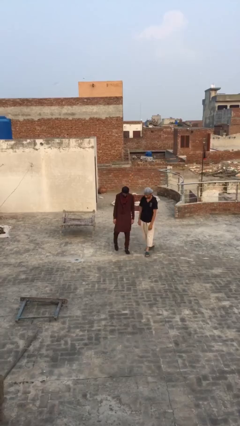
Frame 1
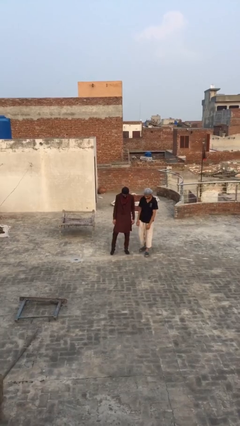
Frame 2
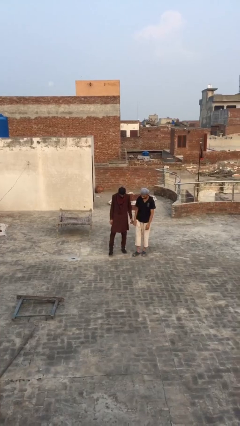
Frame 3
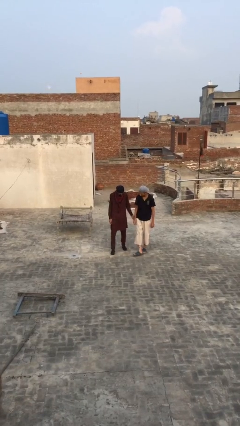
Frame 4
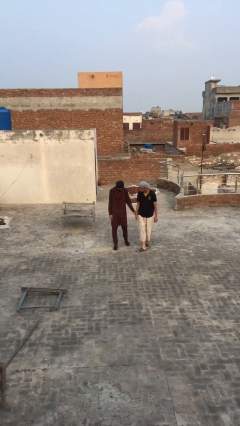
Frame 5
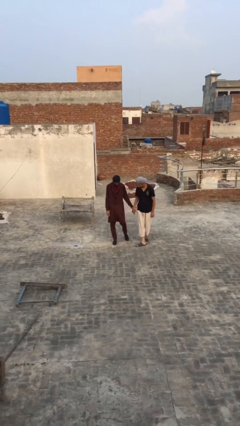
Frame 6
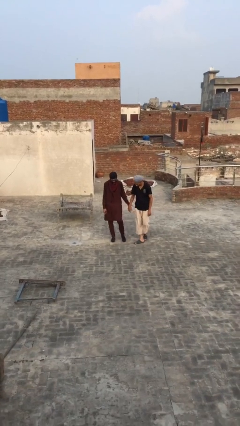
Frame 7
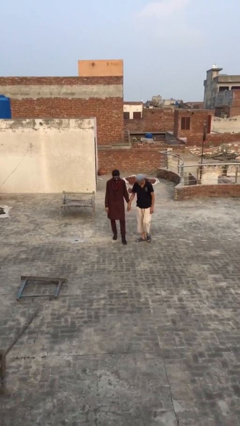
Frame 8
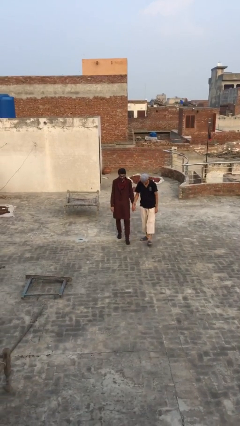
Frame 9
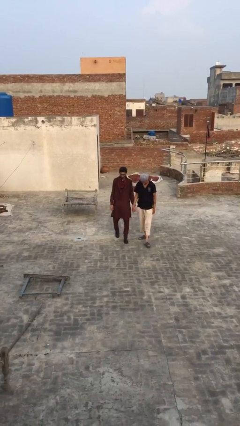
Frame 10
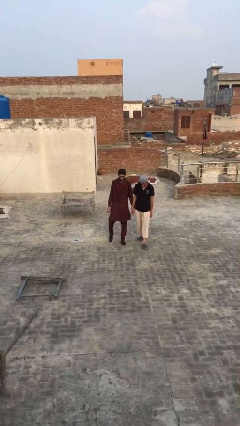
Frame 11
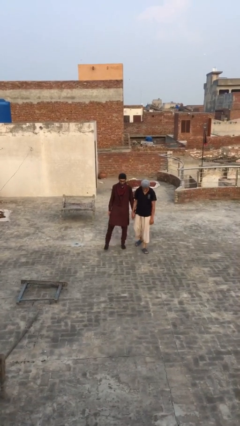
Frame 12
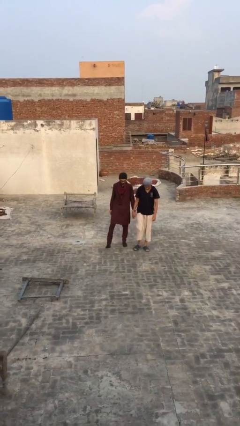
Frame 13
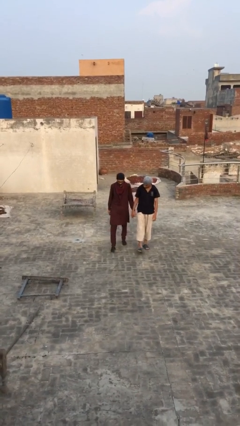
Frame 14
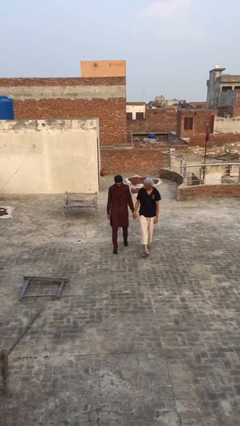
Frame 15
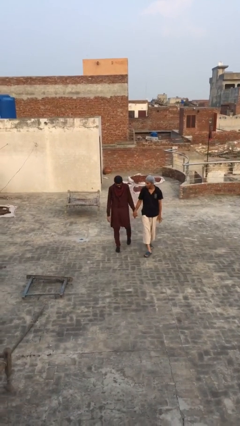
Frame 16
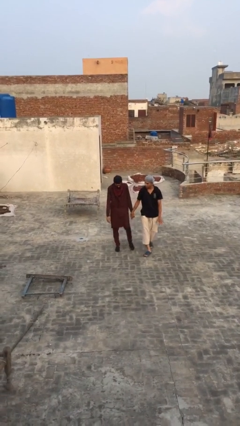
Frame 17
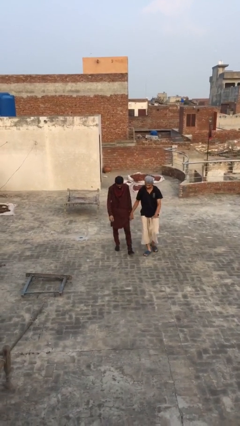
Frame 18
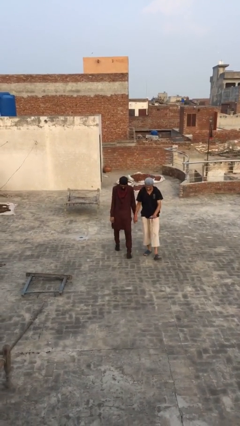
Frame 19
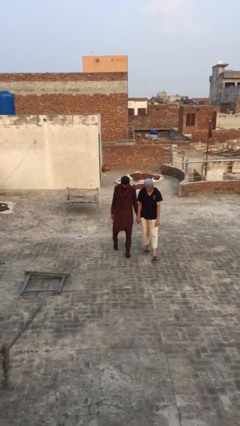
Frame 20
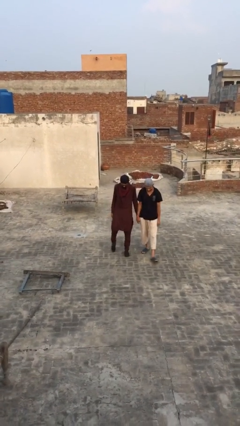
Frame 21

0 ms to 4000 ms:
person holds hand

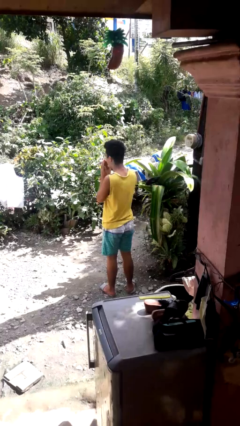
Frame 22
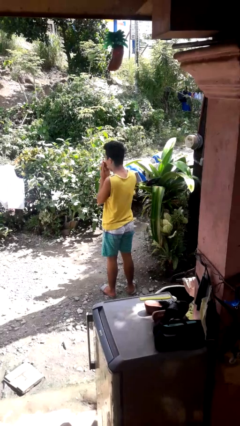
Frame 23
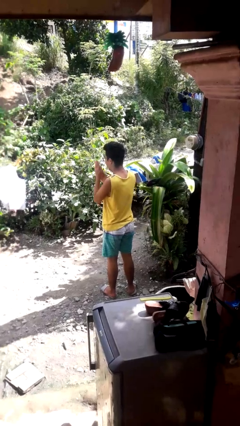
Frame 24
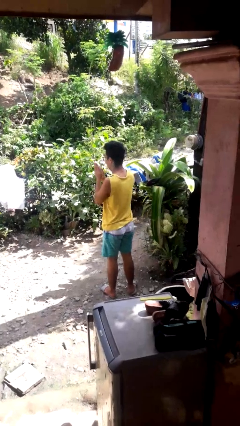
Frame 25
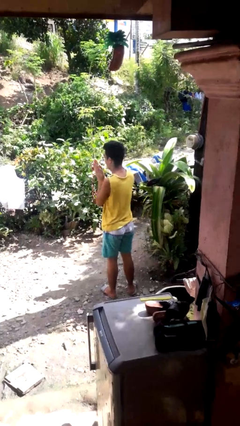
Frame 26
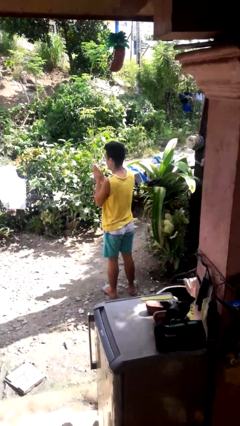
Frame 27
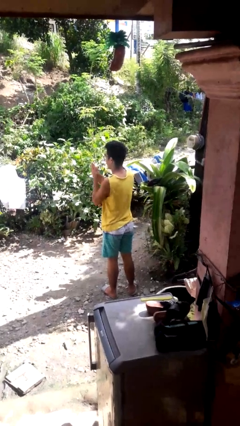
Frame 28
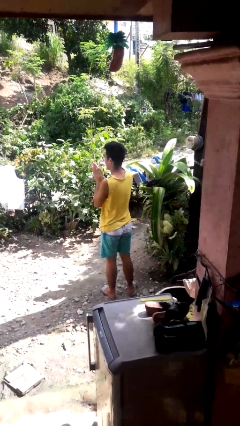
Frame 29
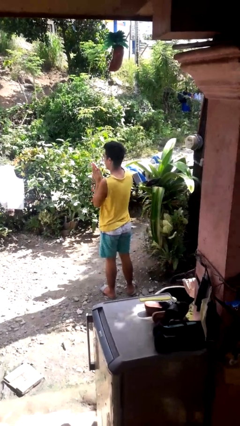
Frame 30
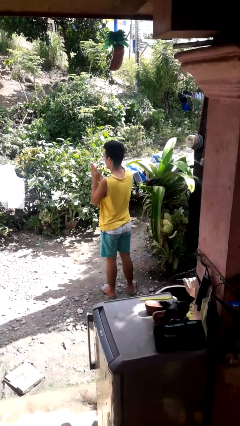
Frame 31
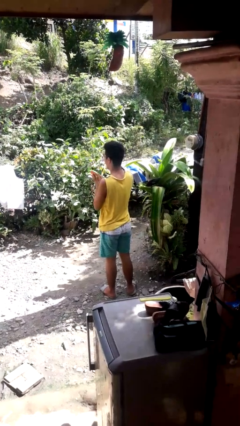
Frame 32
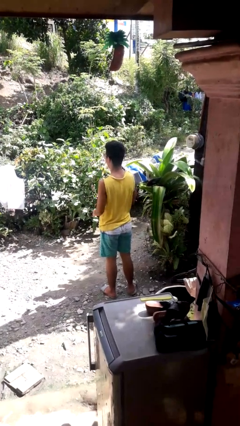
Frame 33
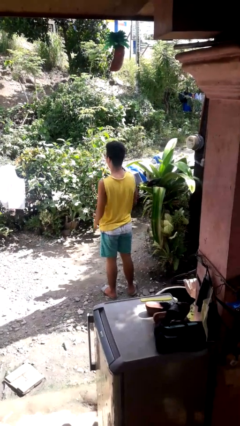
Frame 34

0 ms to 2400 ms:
person blows into hands

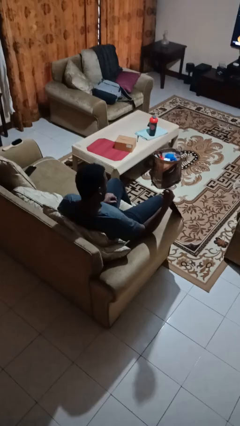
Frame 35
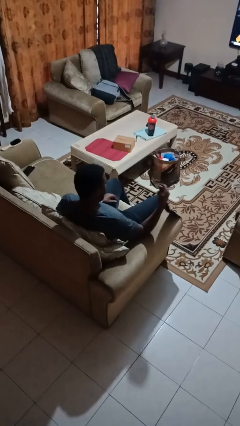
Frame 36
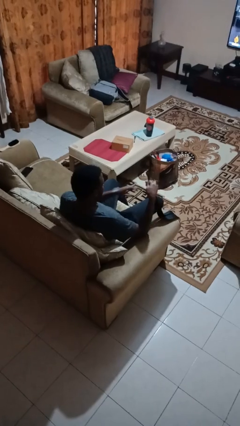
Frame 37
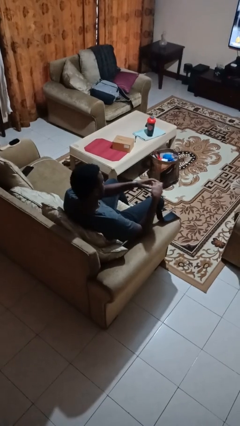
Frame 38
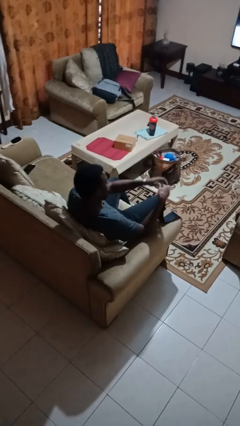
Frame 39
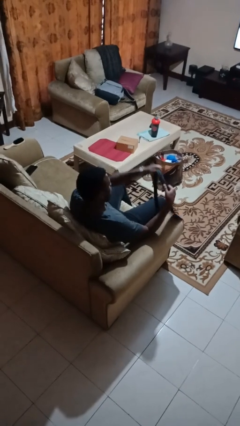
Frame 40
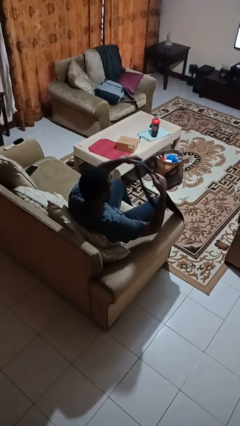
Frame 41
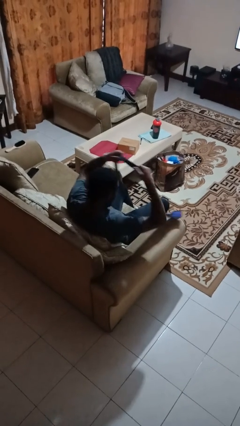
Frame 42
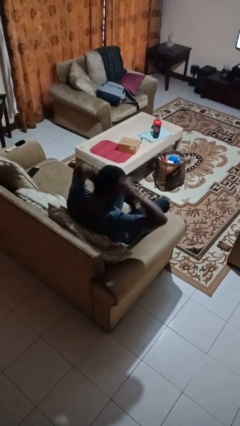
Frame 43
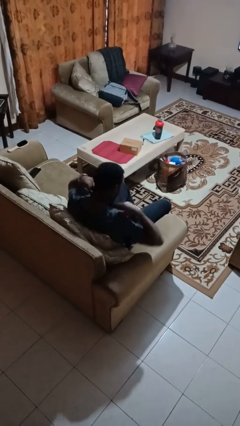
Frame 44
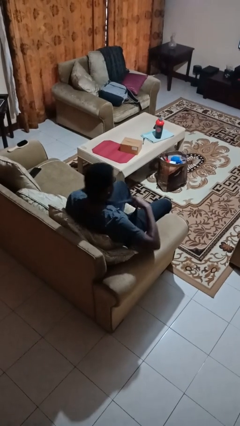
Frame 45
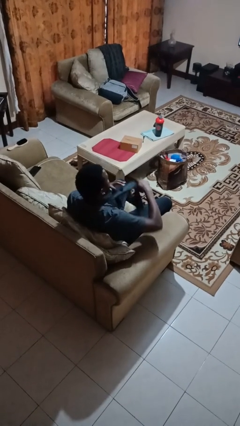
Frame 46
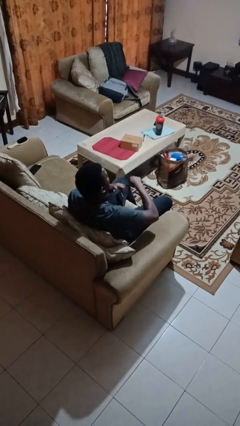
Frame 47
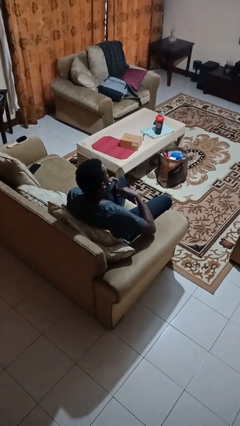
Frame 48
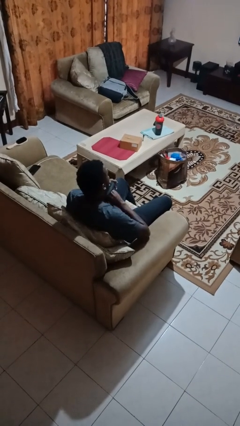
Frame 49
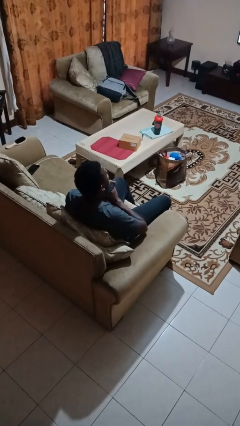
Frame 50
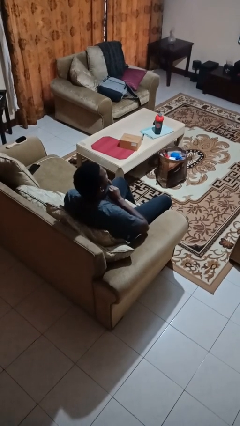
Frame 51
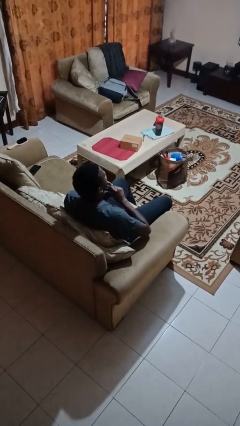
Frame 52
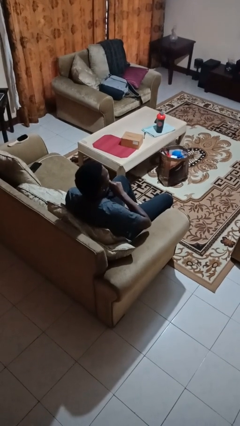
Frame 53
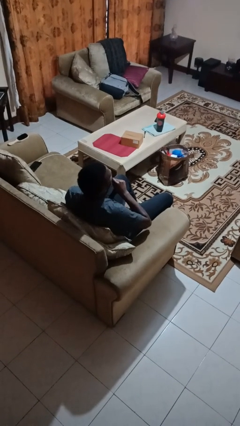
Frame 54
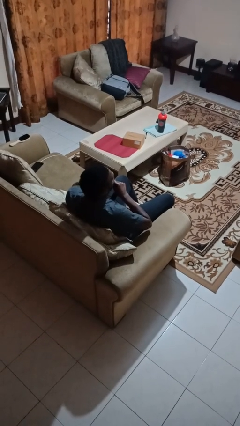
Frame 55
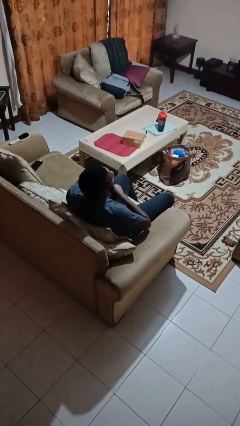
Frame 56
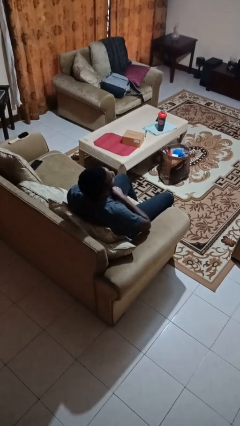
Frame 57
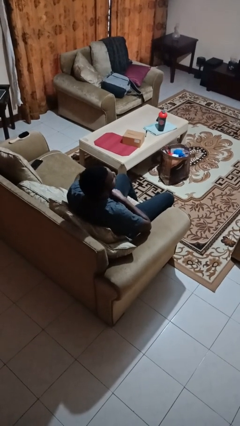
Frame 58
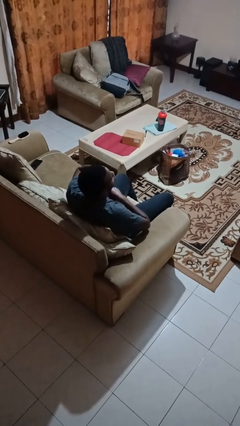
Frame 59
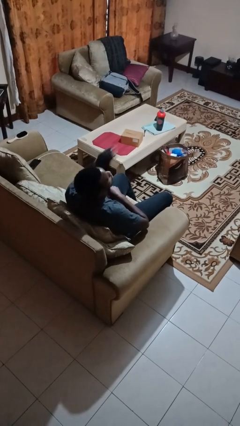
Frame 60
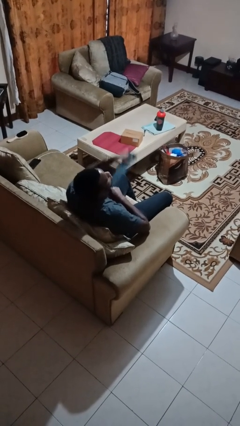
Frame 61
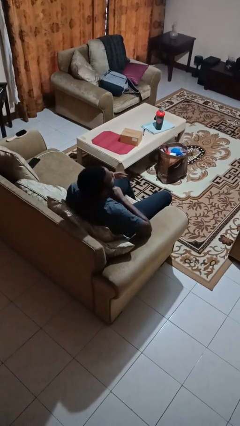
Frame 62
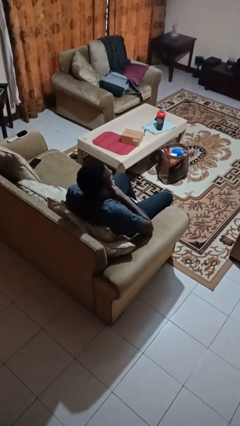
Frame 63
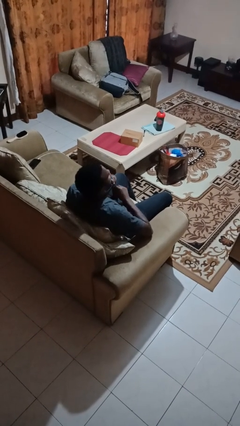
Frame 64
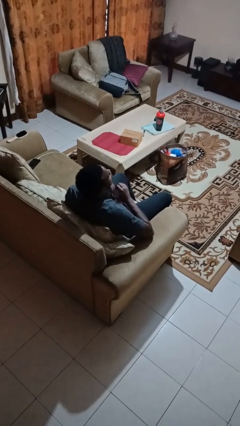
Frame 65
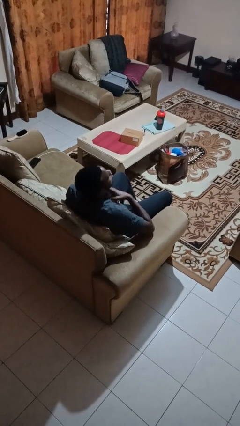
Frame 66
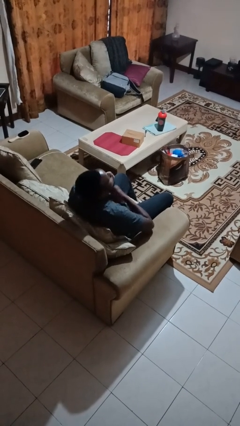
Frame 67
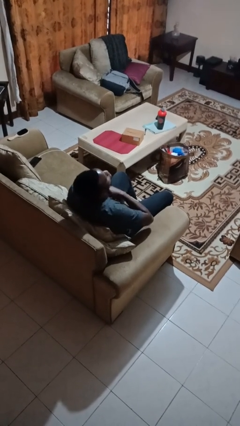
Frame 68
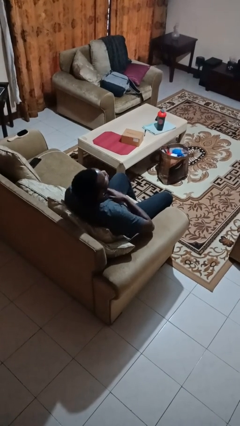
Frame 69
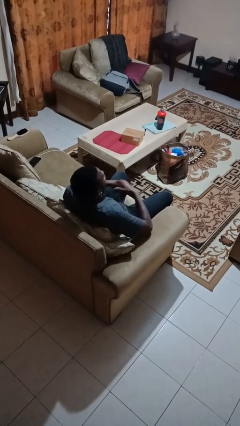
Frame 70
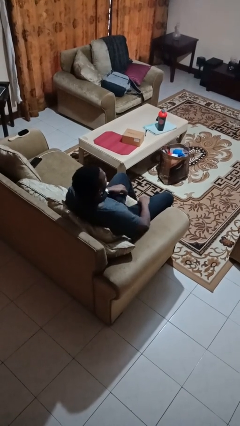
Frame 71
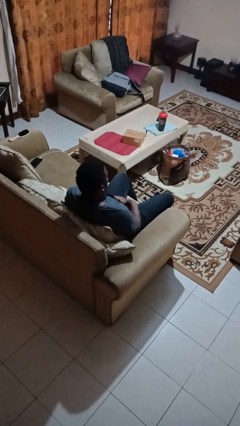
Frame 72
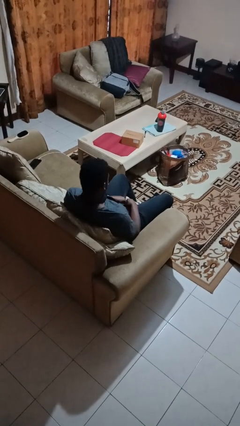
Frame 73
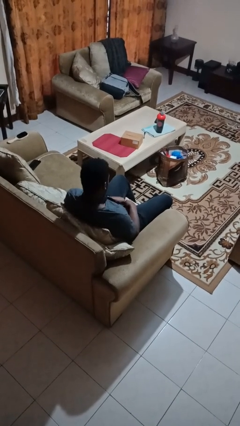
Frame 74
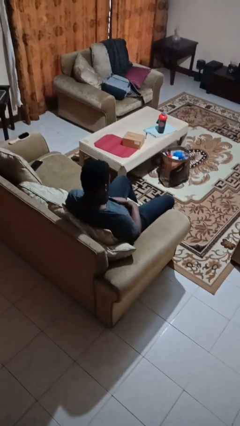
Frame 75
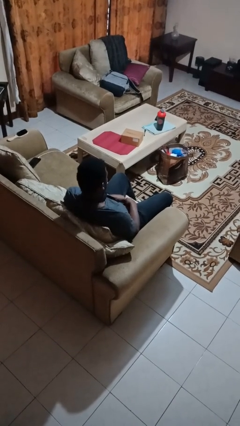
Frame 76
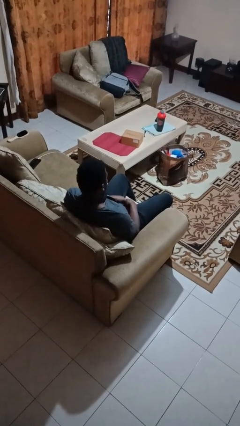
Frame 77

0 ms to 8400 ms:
person puts on necktie

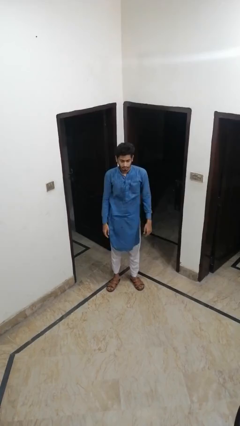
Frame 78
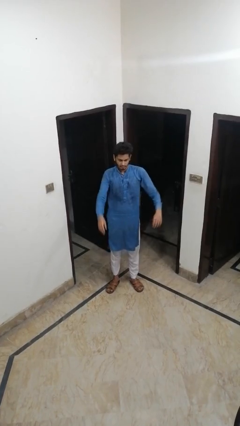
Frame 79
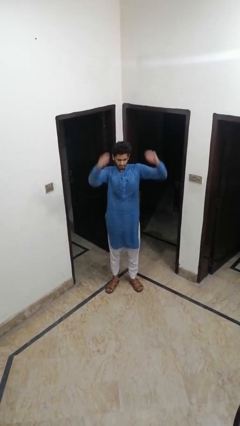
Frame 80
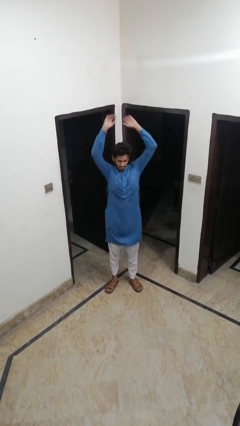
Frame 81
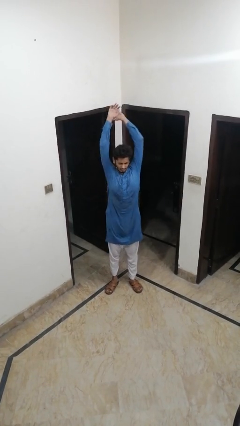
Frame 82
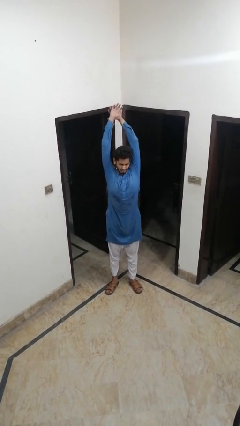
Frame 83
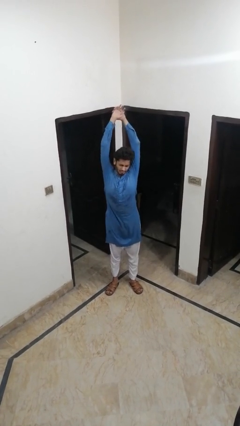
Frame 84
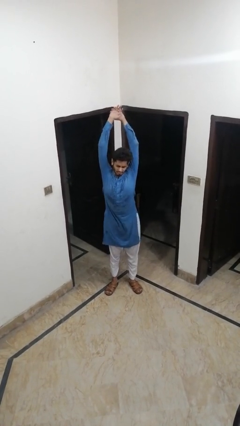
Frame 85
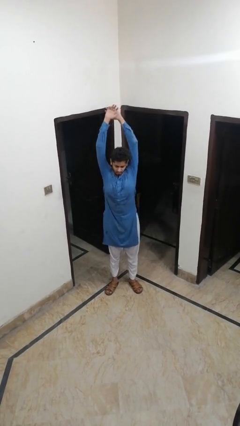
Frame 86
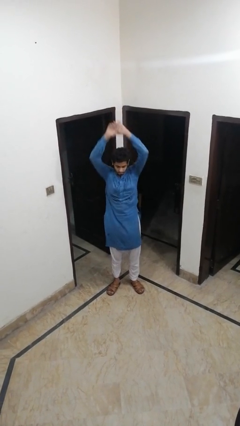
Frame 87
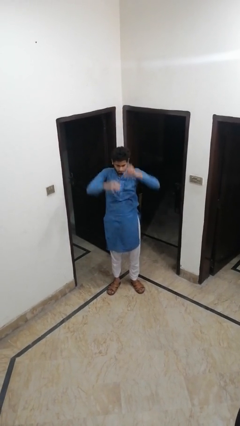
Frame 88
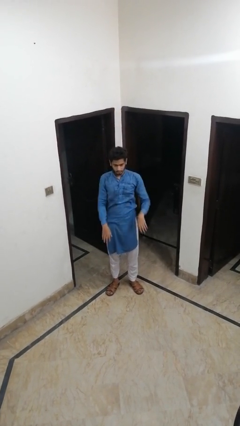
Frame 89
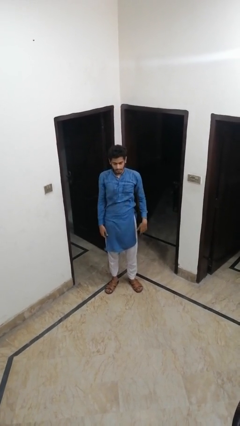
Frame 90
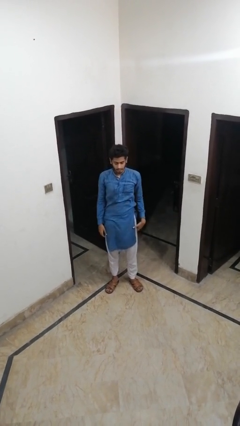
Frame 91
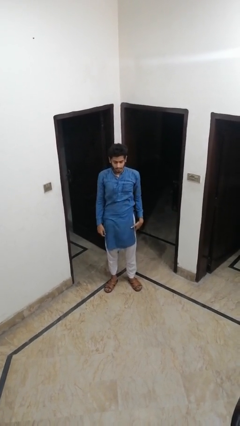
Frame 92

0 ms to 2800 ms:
person stretches arms over head
